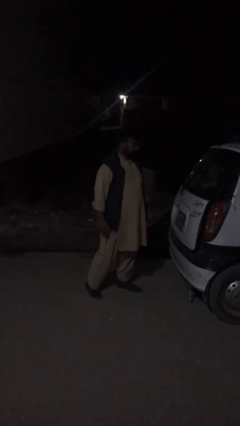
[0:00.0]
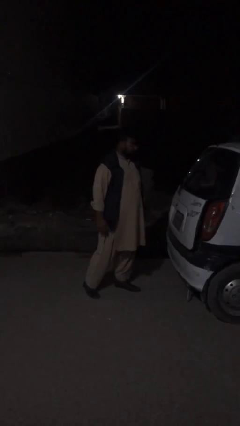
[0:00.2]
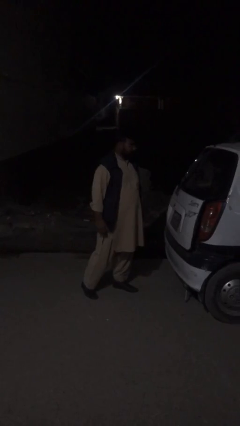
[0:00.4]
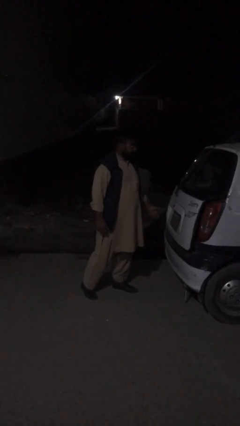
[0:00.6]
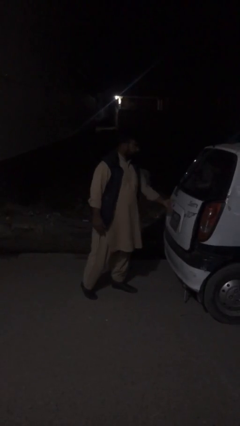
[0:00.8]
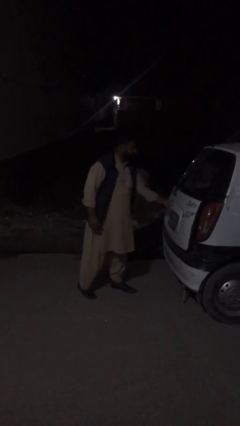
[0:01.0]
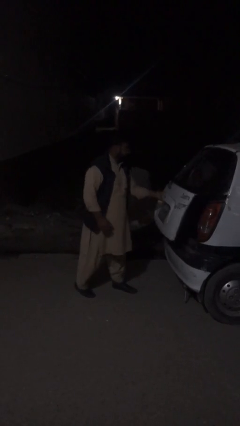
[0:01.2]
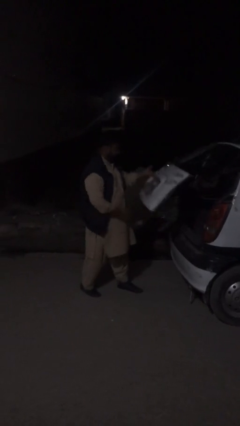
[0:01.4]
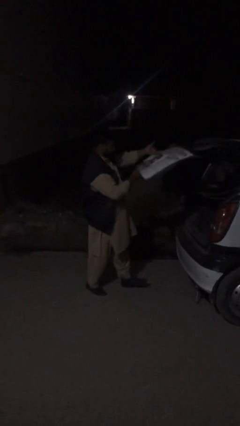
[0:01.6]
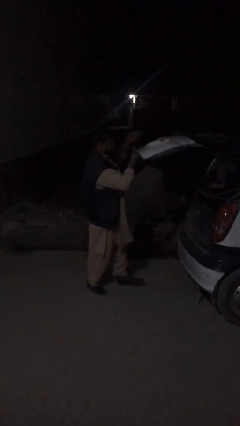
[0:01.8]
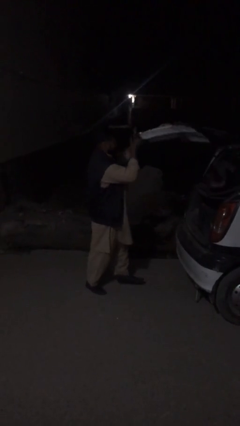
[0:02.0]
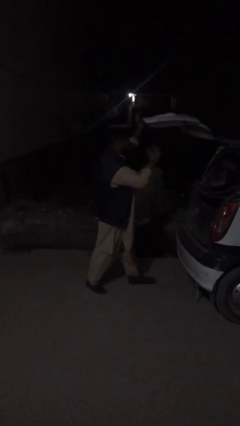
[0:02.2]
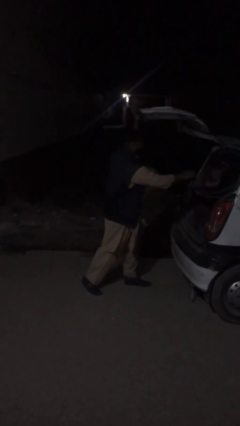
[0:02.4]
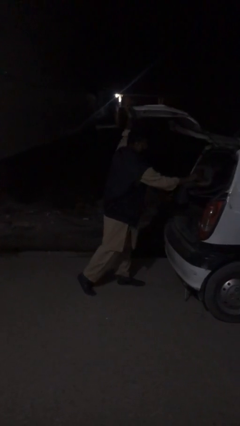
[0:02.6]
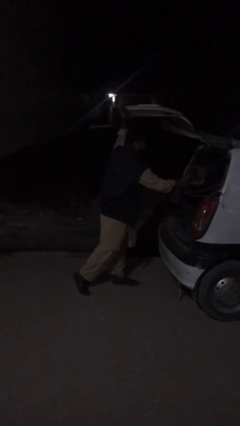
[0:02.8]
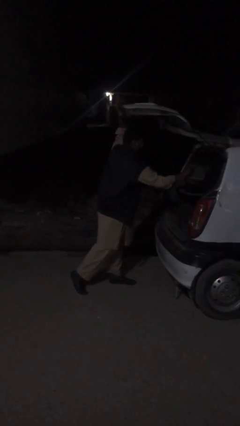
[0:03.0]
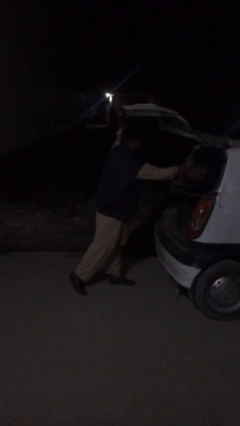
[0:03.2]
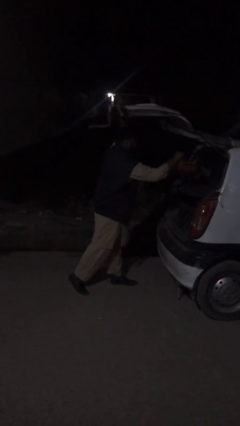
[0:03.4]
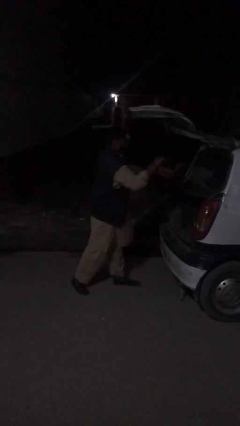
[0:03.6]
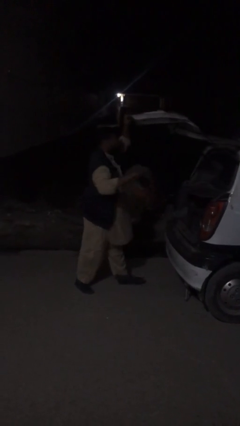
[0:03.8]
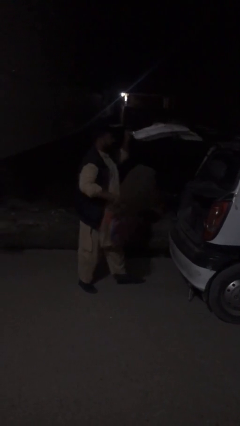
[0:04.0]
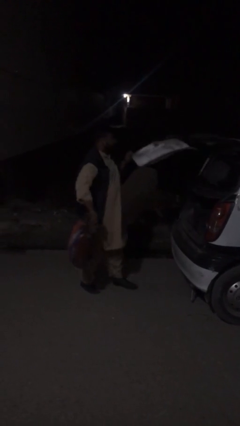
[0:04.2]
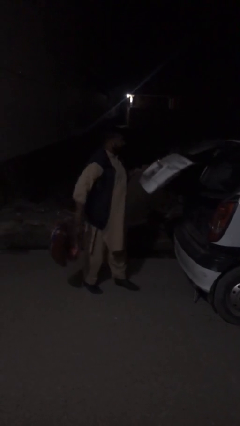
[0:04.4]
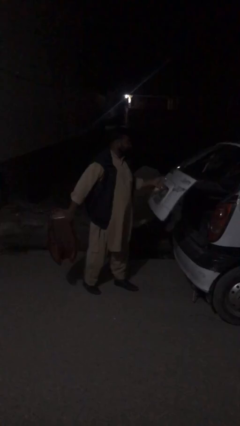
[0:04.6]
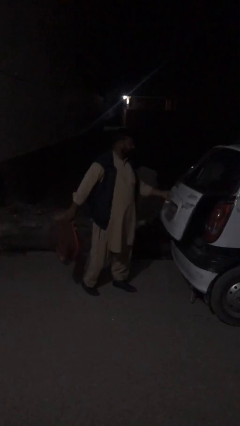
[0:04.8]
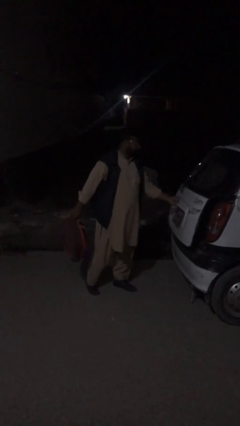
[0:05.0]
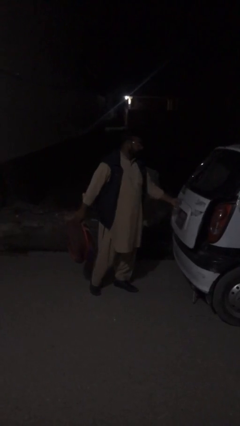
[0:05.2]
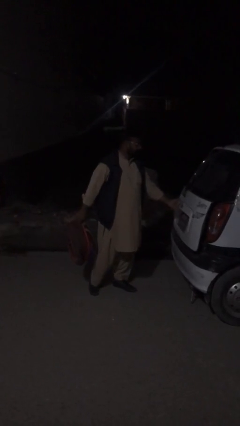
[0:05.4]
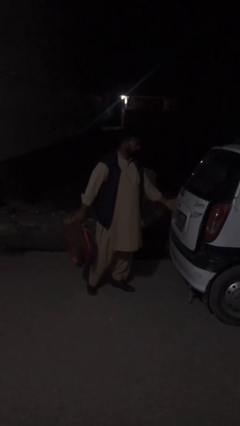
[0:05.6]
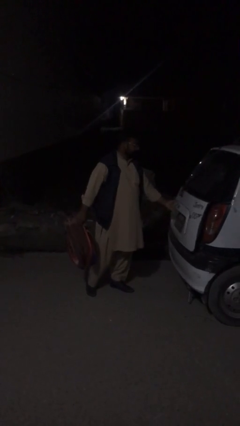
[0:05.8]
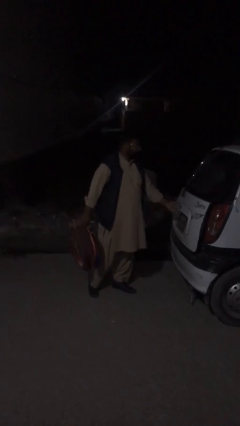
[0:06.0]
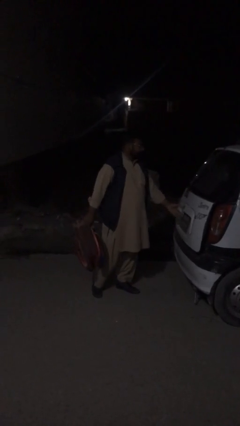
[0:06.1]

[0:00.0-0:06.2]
person unloads car

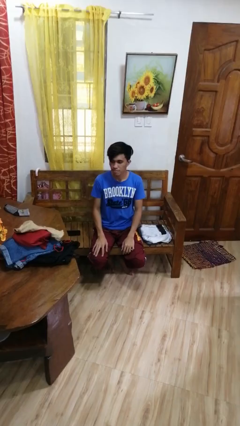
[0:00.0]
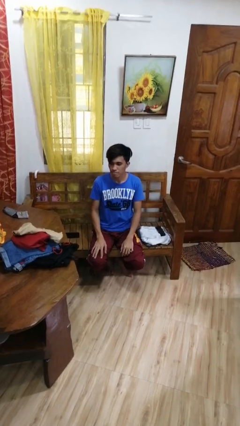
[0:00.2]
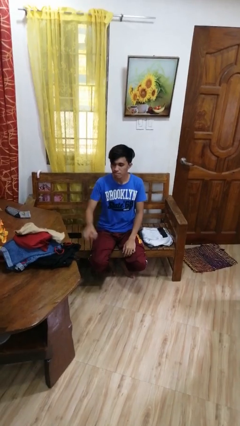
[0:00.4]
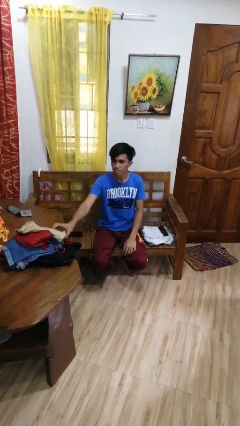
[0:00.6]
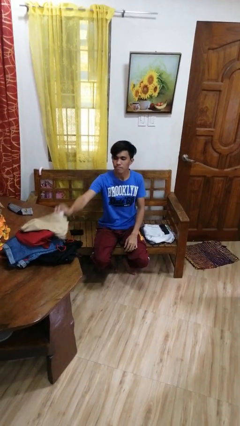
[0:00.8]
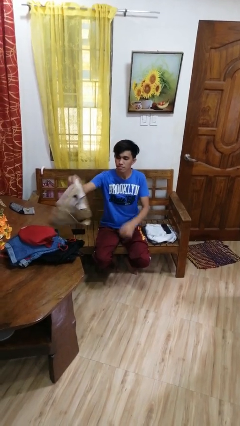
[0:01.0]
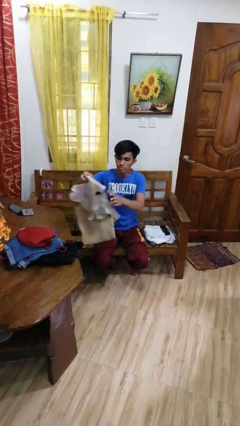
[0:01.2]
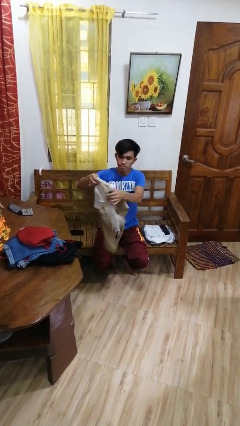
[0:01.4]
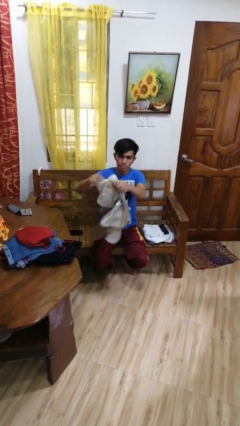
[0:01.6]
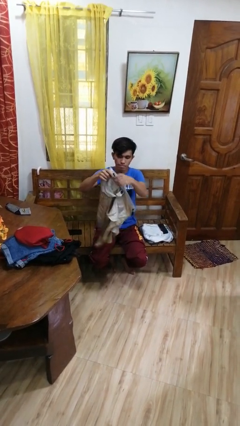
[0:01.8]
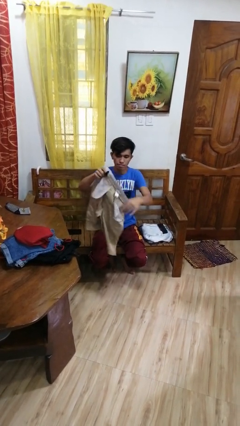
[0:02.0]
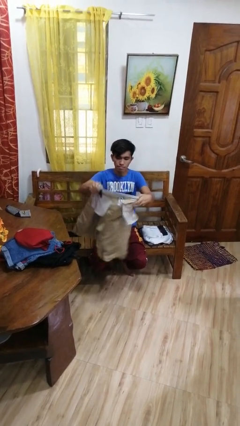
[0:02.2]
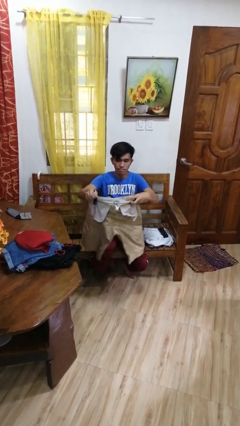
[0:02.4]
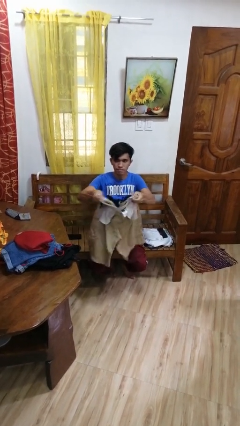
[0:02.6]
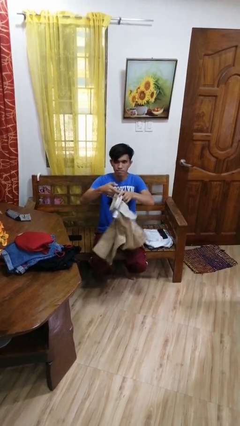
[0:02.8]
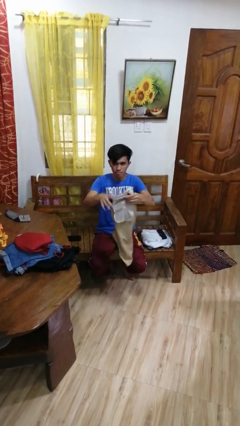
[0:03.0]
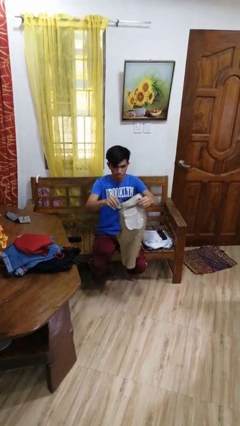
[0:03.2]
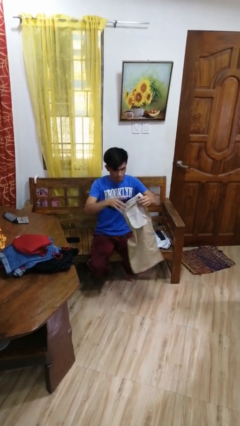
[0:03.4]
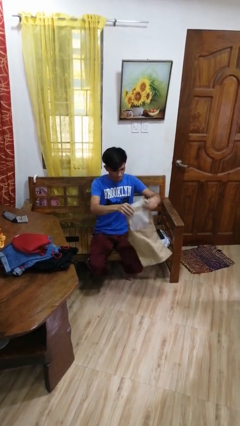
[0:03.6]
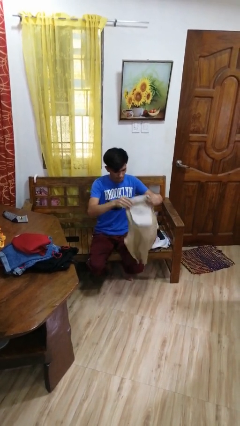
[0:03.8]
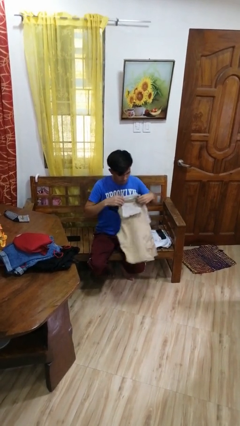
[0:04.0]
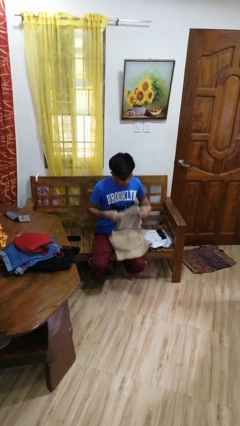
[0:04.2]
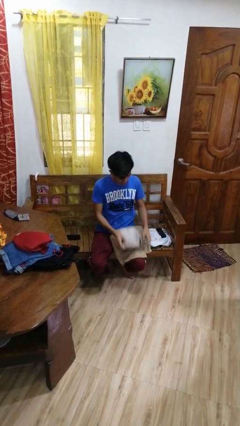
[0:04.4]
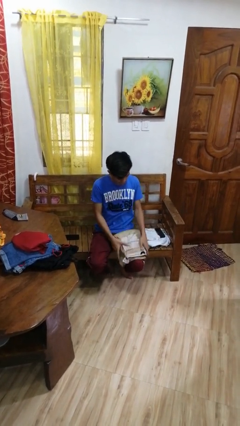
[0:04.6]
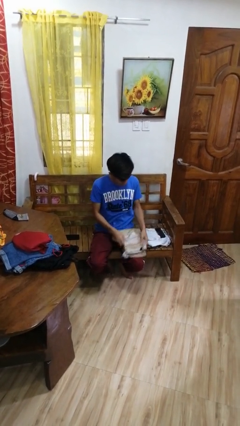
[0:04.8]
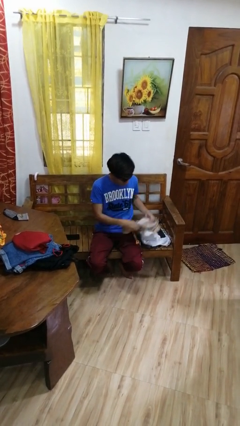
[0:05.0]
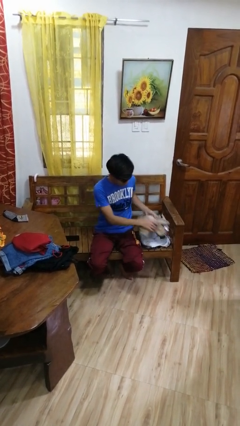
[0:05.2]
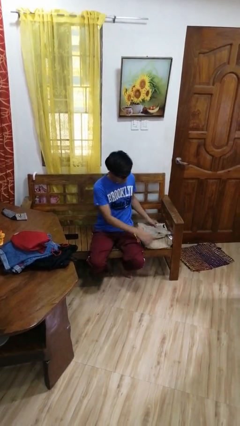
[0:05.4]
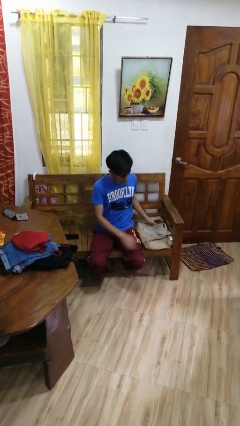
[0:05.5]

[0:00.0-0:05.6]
person folds pants

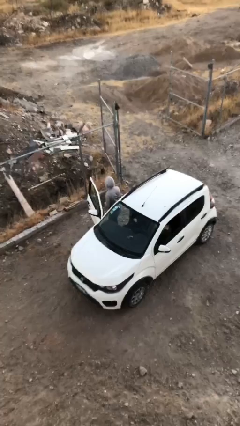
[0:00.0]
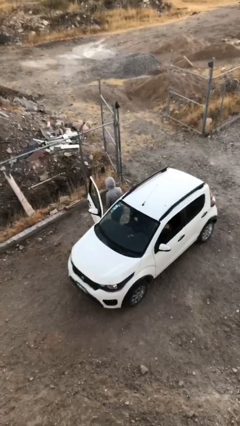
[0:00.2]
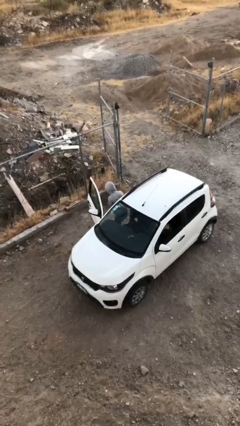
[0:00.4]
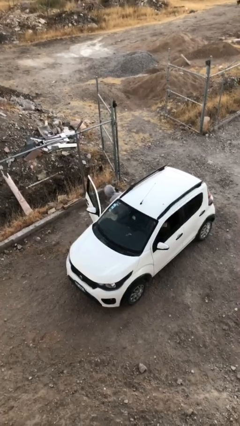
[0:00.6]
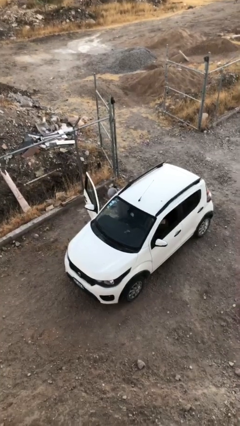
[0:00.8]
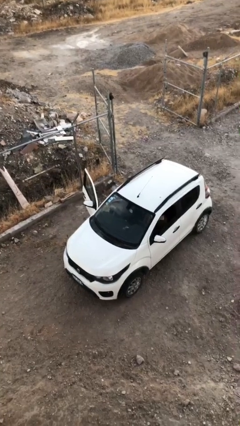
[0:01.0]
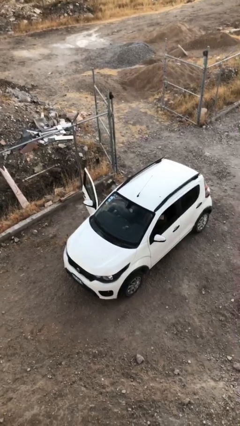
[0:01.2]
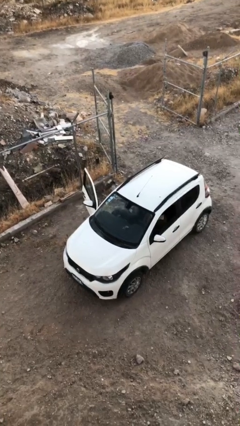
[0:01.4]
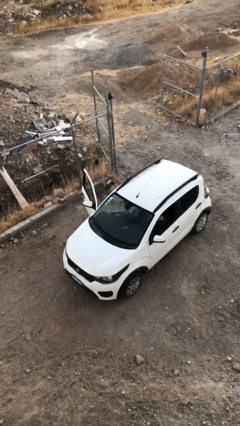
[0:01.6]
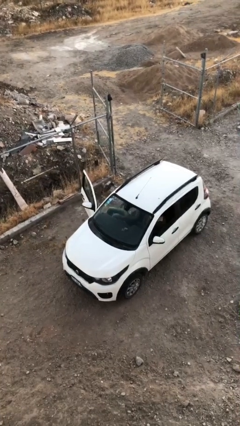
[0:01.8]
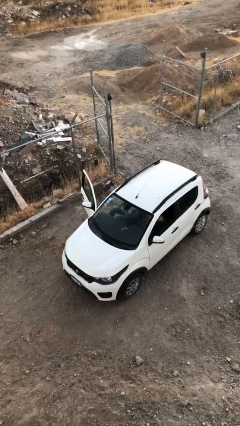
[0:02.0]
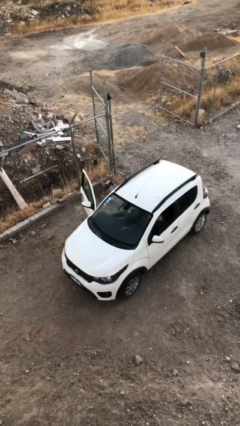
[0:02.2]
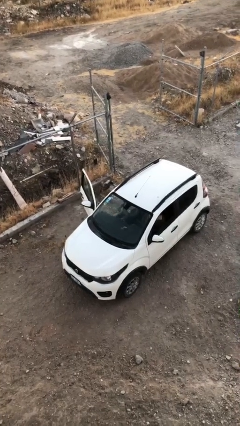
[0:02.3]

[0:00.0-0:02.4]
person enters car

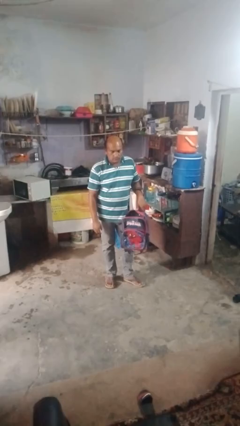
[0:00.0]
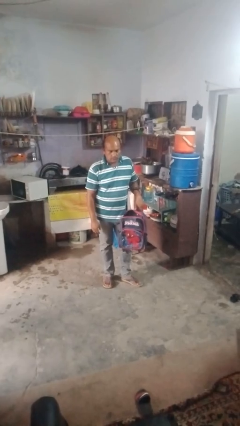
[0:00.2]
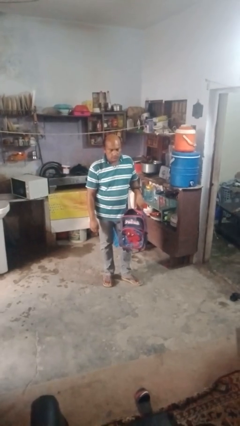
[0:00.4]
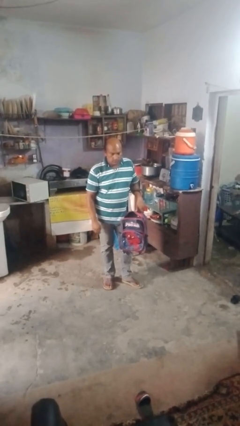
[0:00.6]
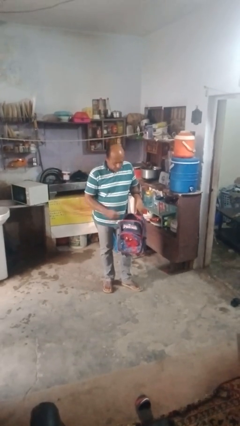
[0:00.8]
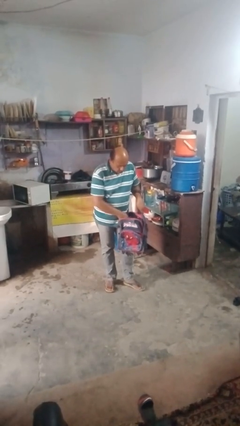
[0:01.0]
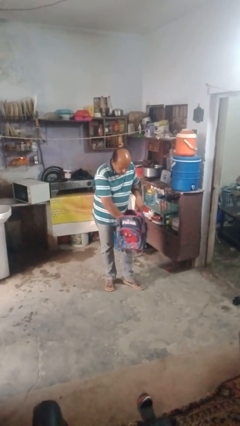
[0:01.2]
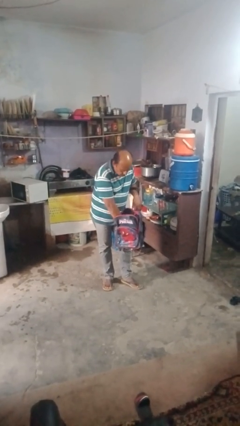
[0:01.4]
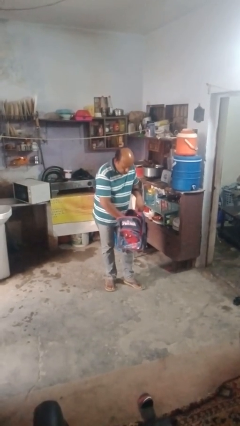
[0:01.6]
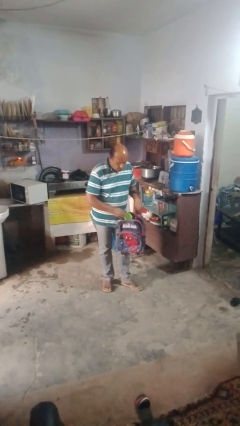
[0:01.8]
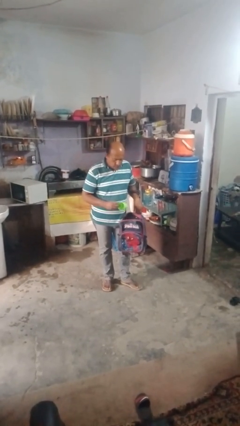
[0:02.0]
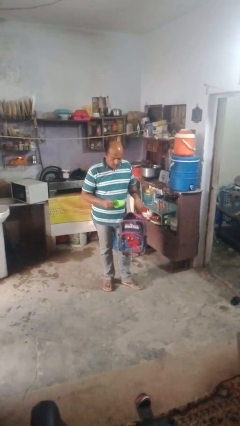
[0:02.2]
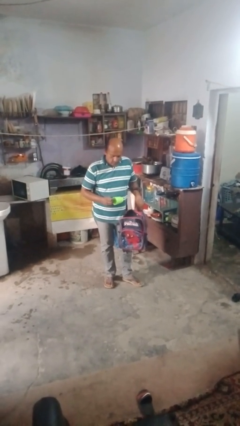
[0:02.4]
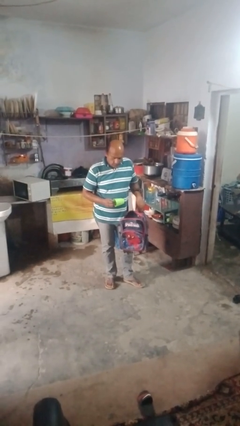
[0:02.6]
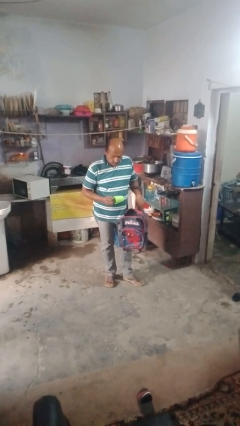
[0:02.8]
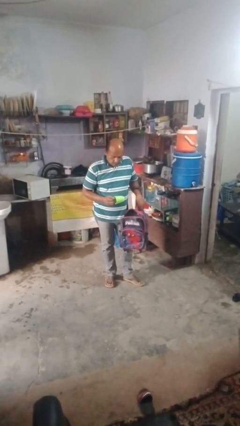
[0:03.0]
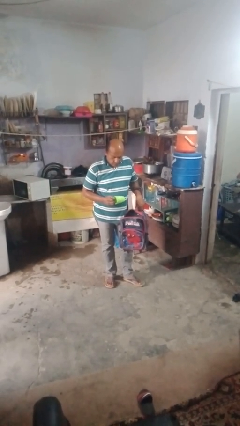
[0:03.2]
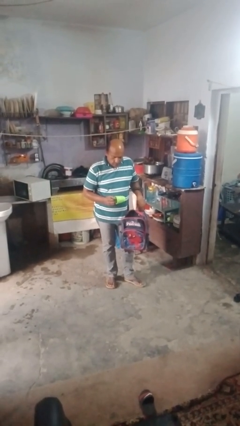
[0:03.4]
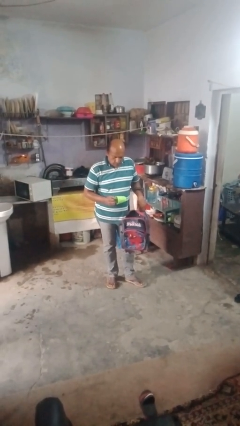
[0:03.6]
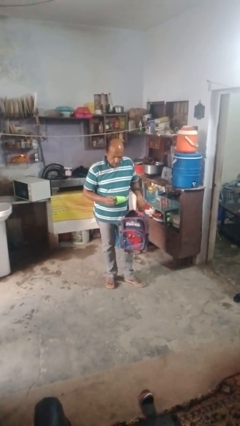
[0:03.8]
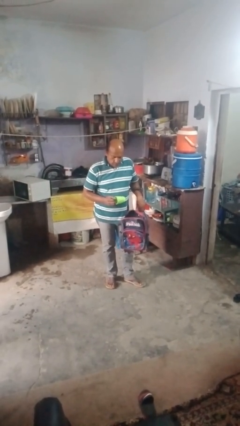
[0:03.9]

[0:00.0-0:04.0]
person takes object from bag
